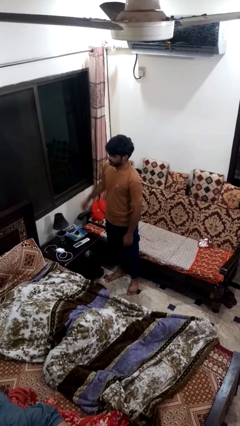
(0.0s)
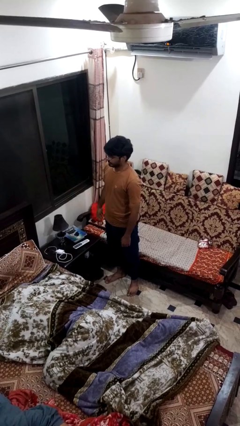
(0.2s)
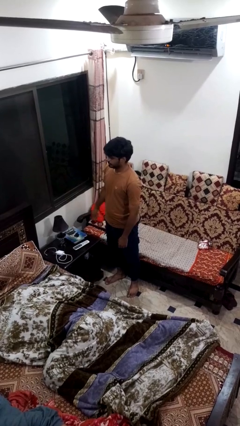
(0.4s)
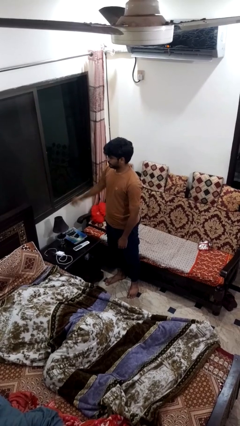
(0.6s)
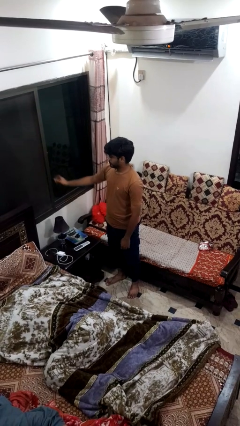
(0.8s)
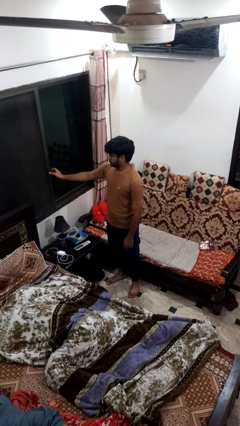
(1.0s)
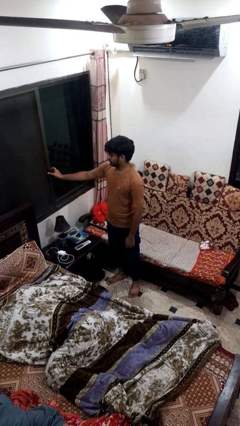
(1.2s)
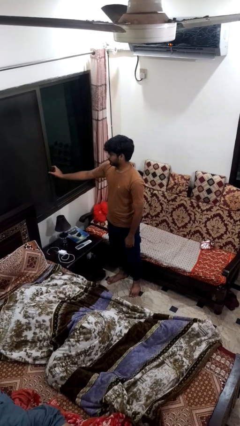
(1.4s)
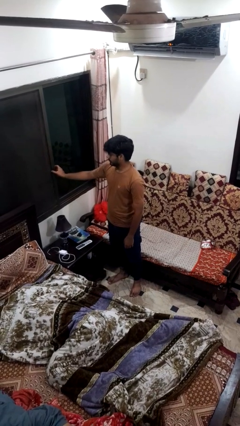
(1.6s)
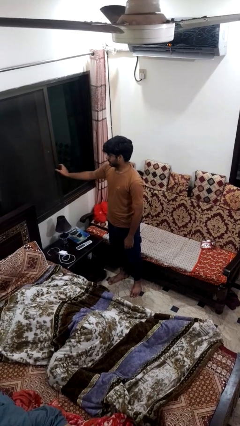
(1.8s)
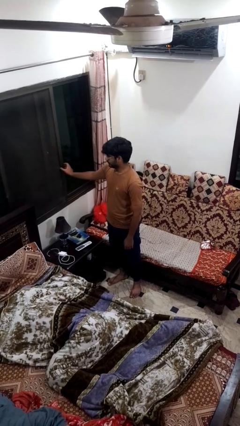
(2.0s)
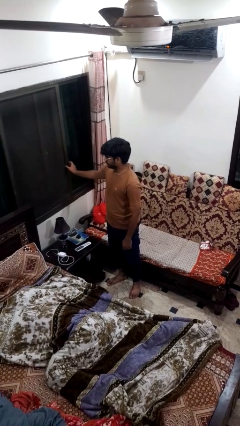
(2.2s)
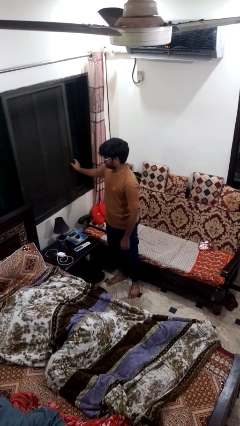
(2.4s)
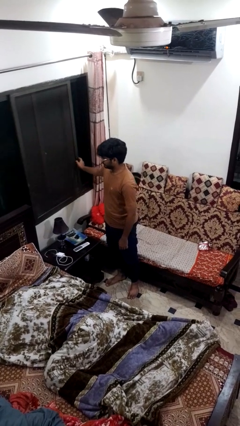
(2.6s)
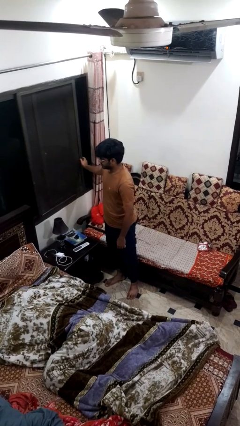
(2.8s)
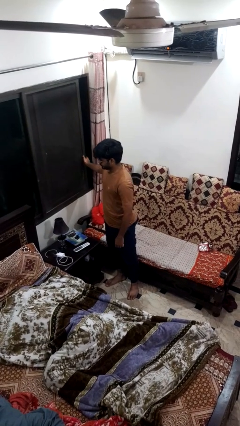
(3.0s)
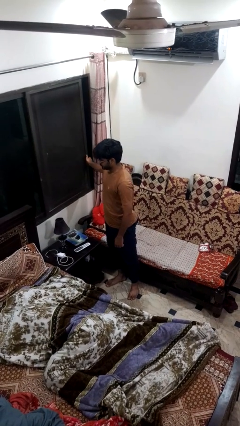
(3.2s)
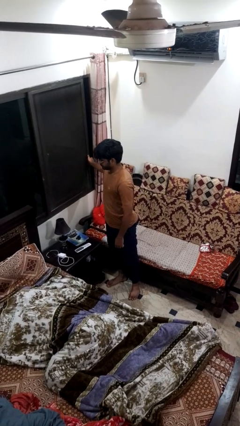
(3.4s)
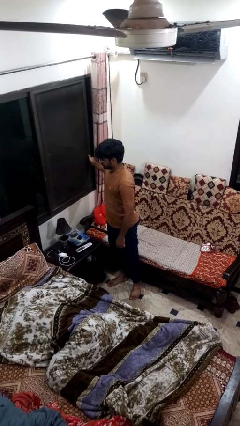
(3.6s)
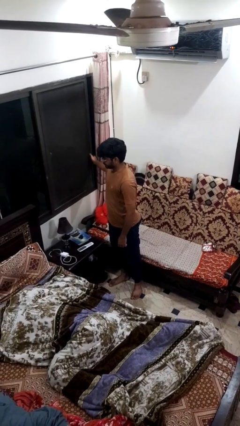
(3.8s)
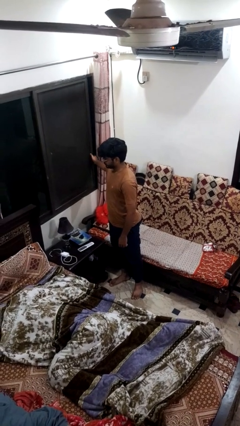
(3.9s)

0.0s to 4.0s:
person opens home window

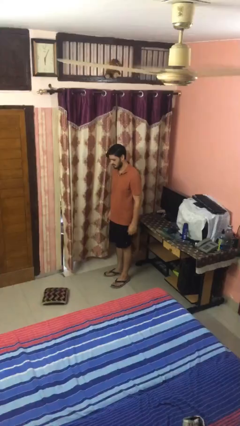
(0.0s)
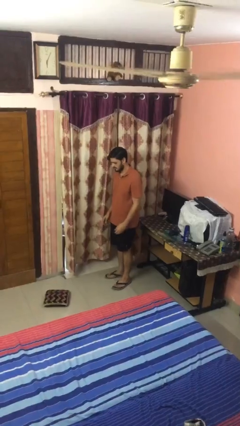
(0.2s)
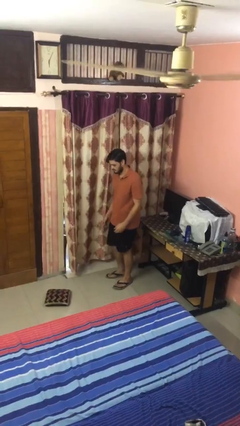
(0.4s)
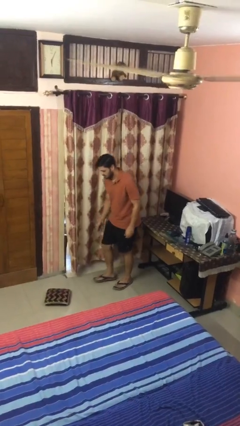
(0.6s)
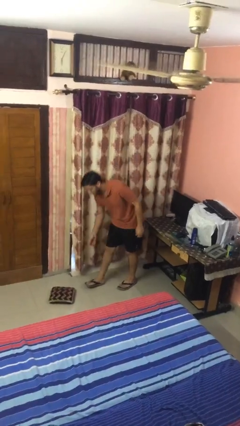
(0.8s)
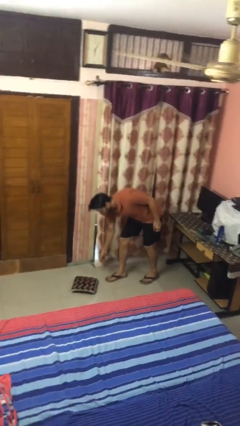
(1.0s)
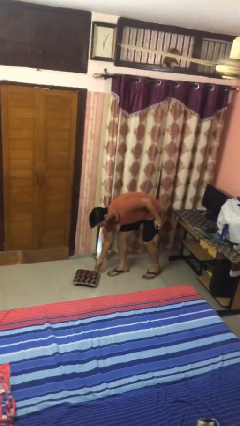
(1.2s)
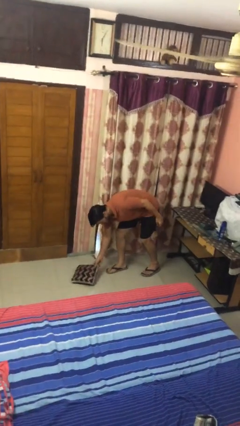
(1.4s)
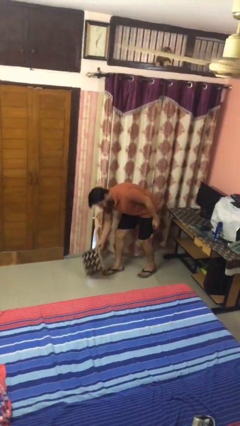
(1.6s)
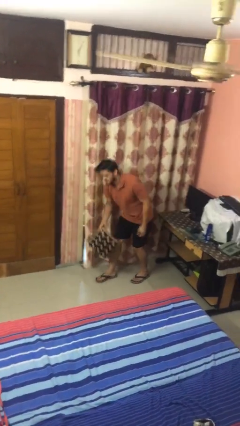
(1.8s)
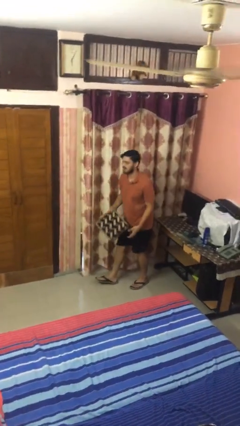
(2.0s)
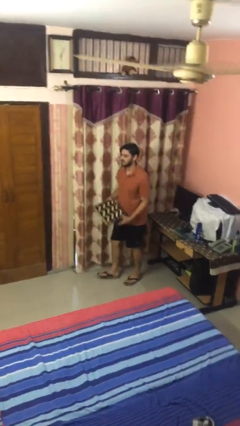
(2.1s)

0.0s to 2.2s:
person picks up object from floor

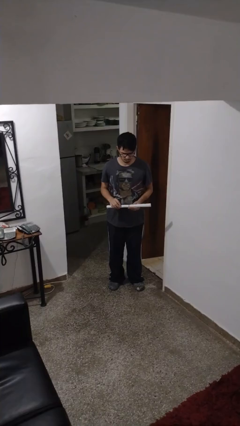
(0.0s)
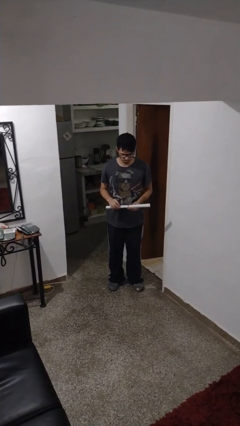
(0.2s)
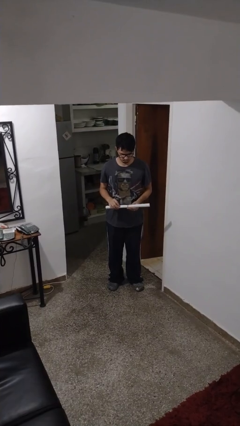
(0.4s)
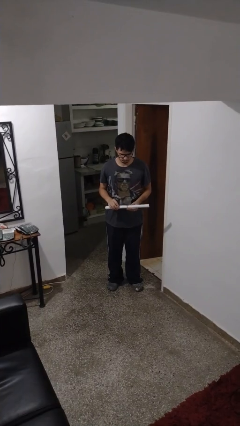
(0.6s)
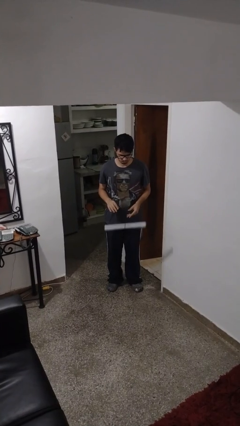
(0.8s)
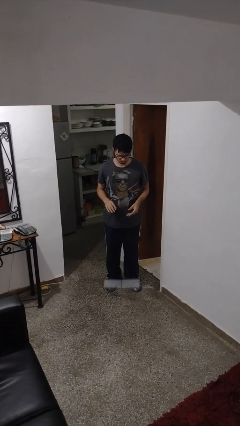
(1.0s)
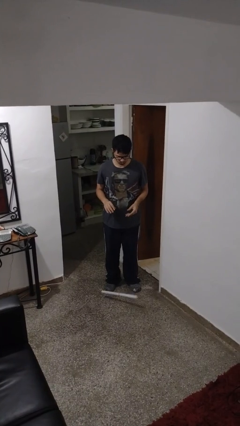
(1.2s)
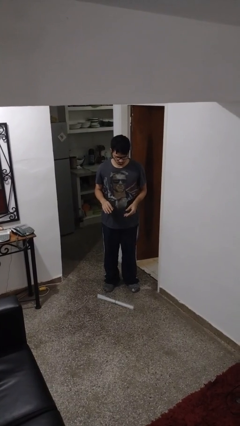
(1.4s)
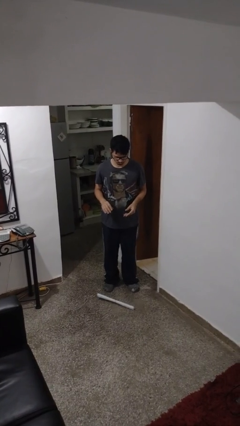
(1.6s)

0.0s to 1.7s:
person drops object

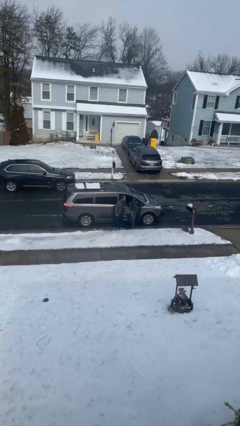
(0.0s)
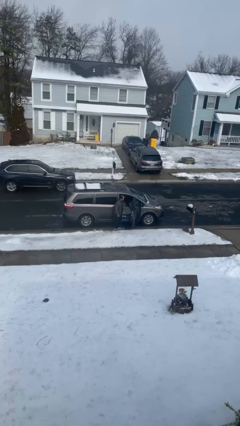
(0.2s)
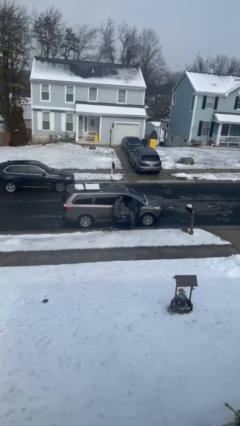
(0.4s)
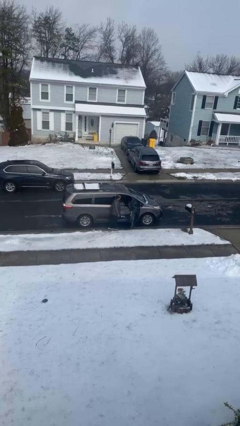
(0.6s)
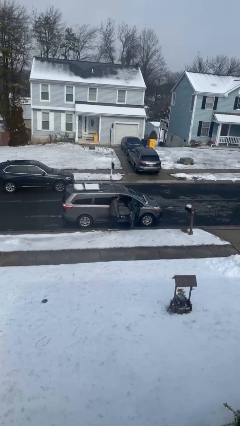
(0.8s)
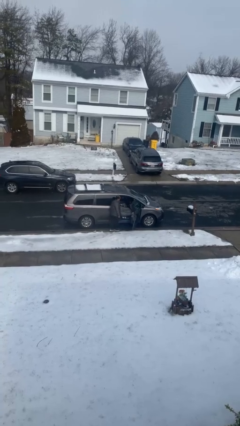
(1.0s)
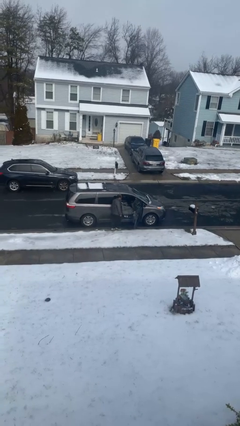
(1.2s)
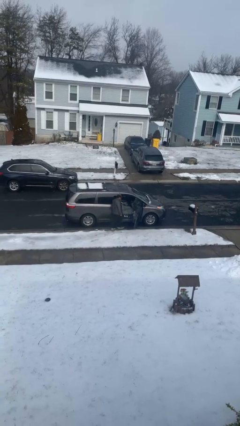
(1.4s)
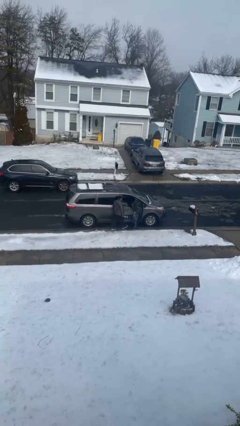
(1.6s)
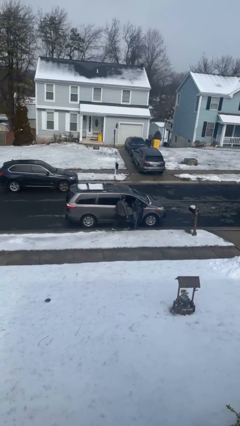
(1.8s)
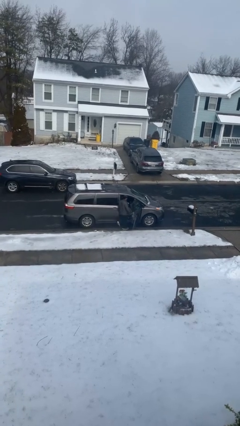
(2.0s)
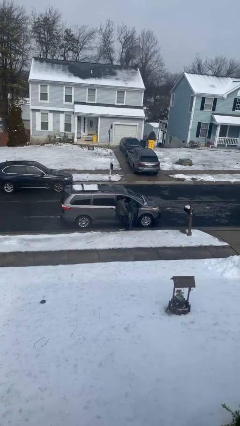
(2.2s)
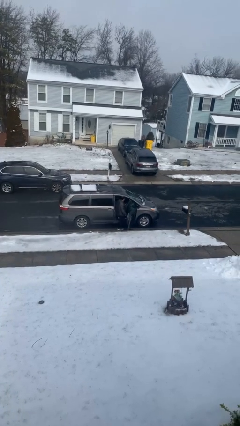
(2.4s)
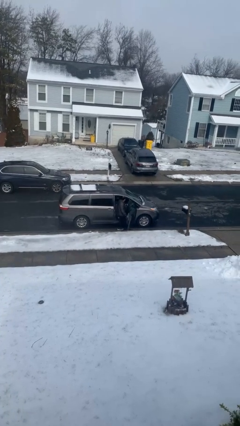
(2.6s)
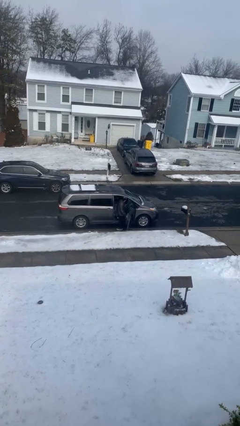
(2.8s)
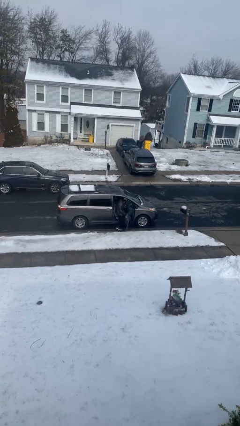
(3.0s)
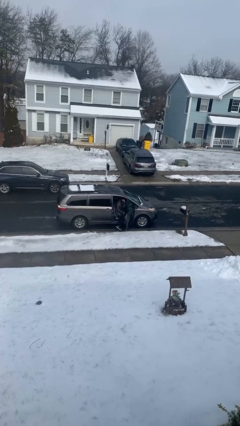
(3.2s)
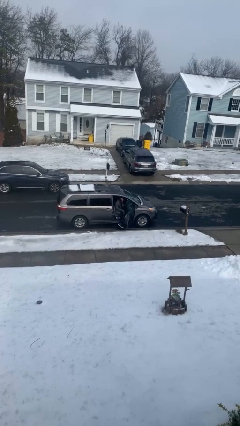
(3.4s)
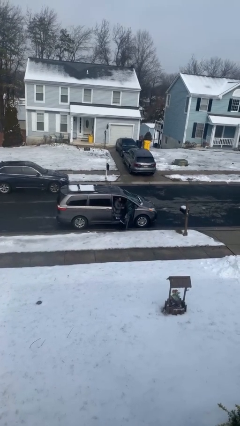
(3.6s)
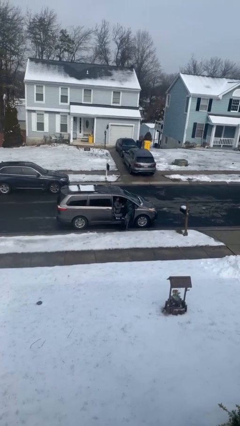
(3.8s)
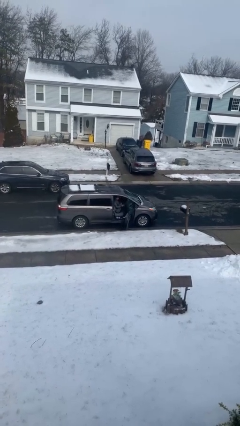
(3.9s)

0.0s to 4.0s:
person enters car

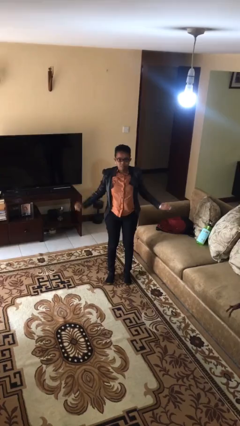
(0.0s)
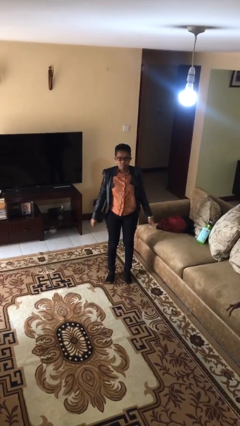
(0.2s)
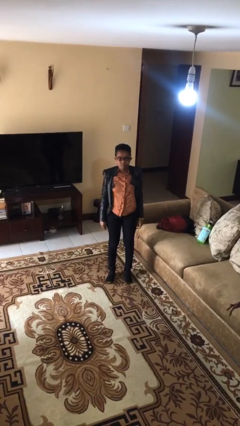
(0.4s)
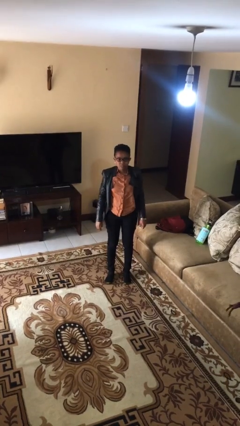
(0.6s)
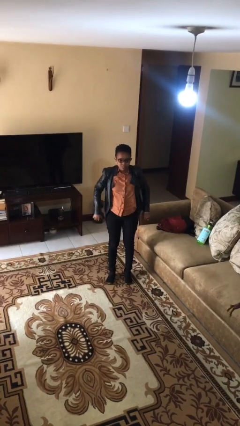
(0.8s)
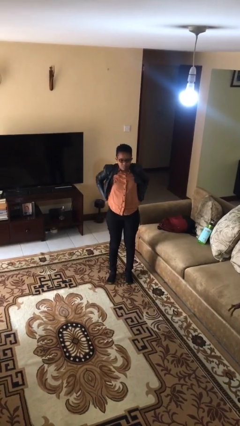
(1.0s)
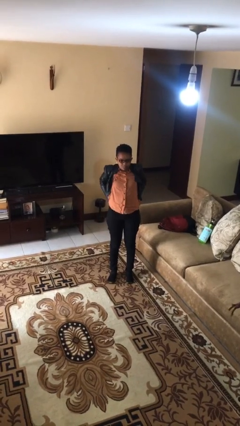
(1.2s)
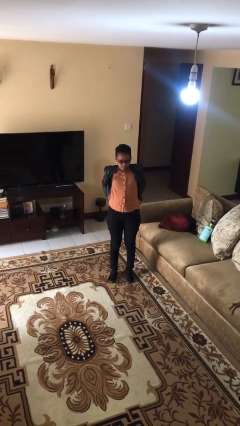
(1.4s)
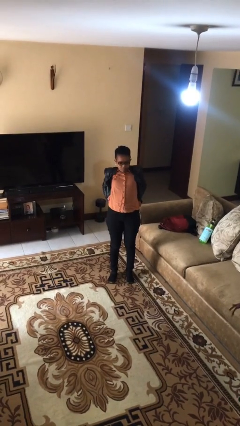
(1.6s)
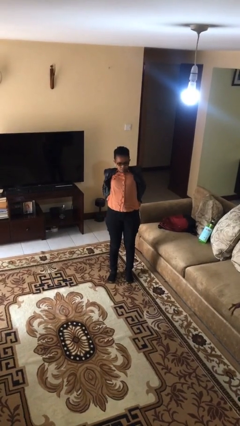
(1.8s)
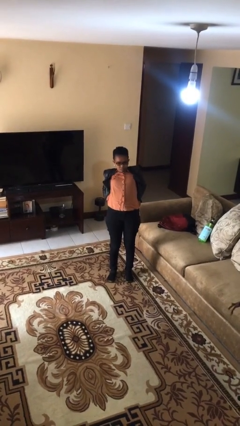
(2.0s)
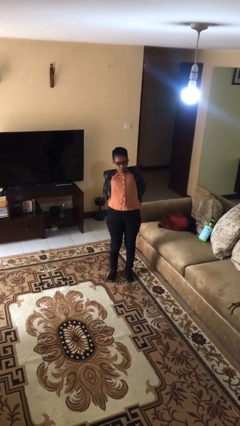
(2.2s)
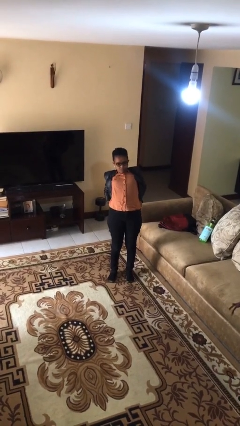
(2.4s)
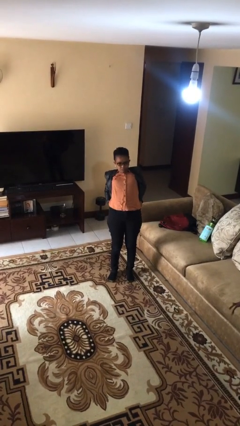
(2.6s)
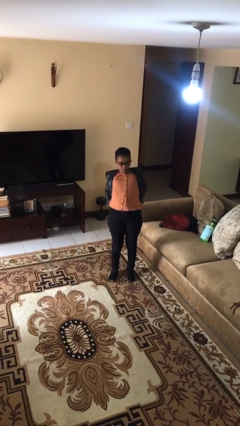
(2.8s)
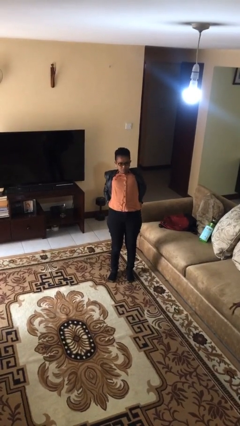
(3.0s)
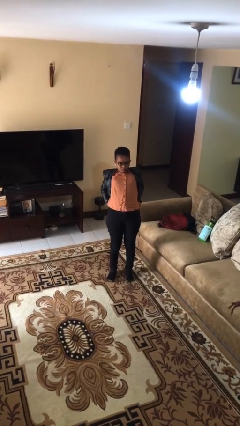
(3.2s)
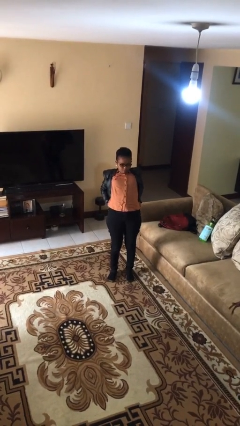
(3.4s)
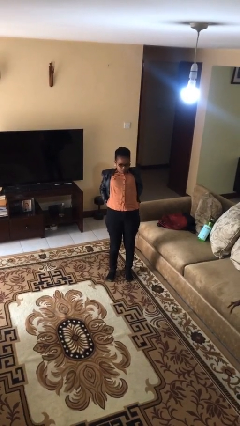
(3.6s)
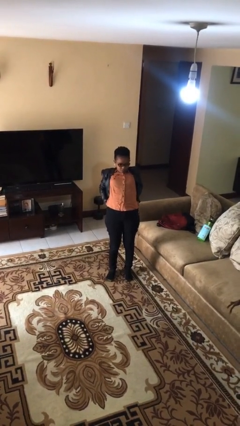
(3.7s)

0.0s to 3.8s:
person stretches back

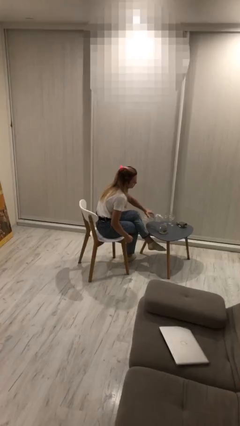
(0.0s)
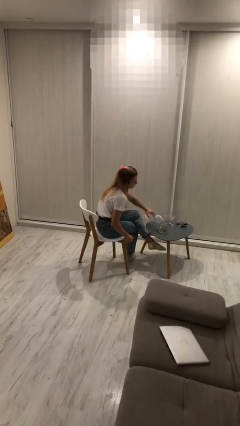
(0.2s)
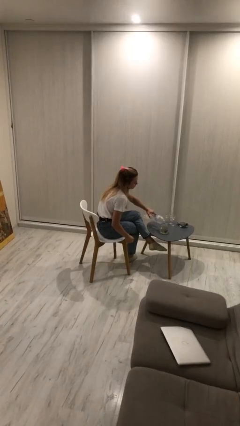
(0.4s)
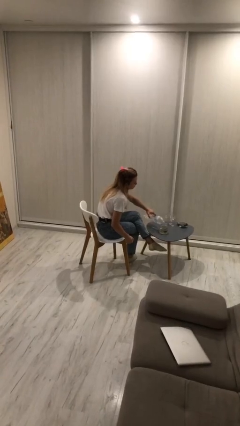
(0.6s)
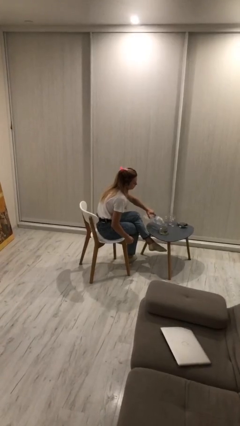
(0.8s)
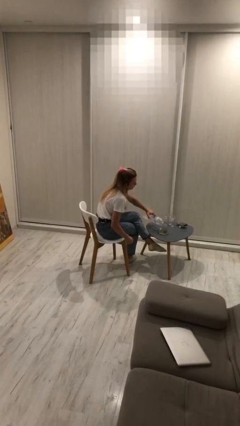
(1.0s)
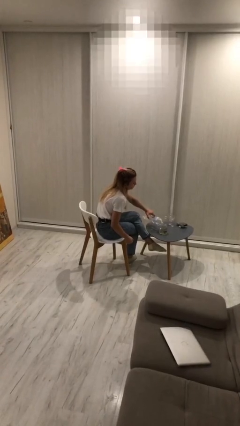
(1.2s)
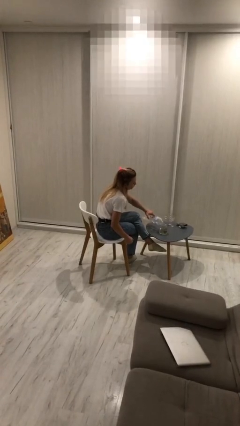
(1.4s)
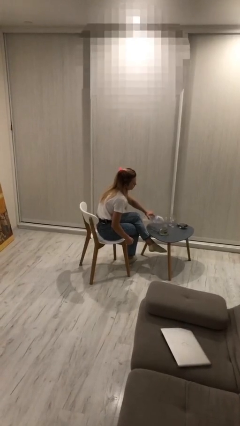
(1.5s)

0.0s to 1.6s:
person pours liquid into cup

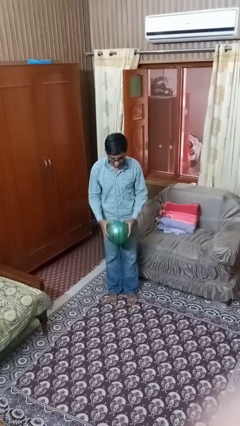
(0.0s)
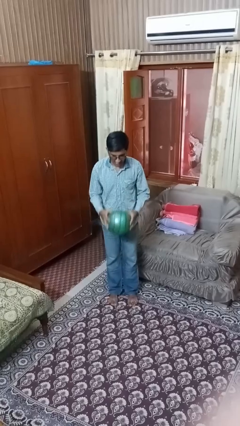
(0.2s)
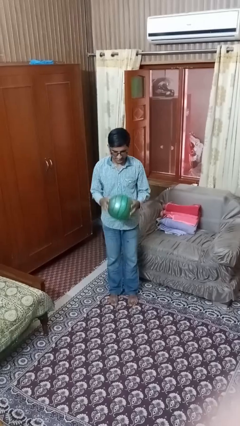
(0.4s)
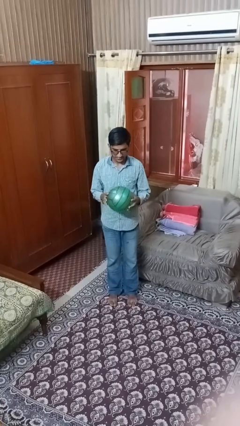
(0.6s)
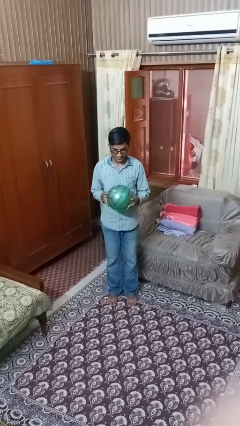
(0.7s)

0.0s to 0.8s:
person bounces ball on floor
